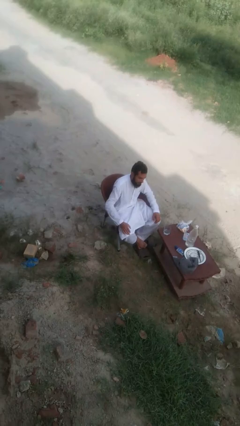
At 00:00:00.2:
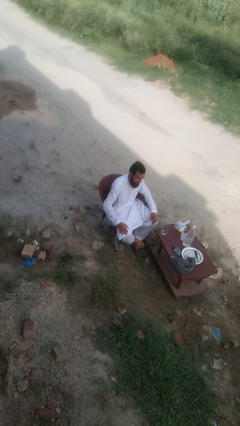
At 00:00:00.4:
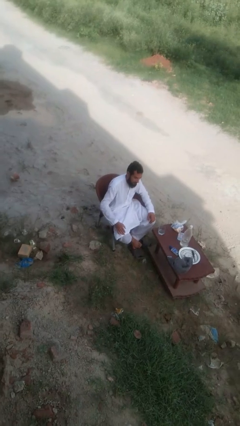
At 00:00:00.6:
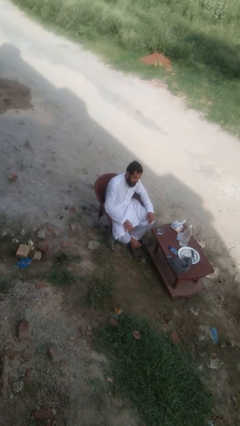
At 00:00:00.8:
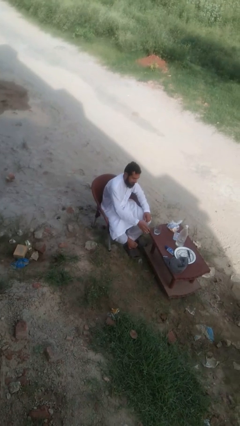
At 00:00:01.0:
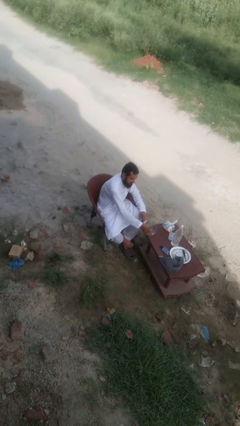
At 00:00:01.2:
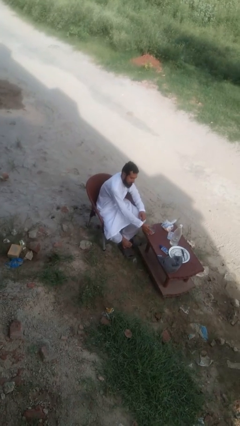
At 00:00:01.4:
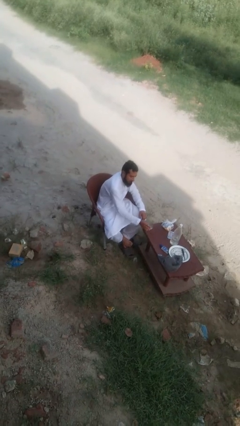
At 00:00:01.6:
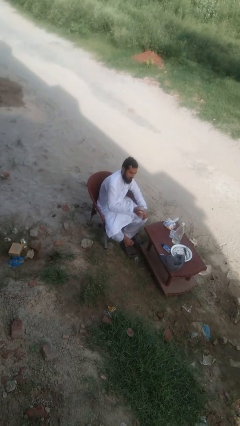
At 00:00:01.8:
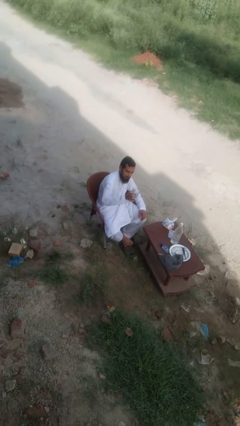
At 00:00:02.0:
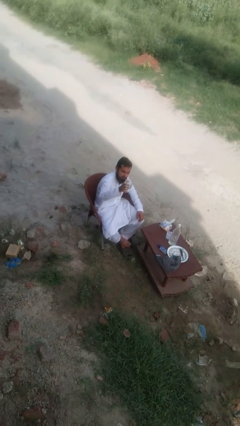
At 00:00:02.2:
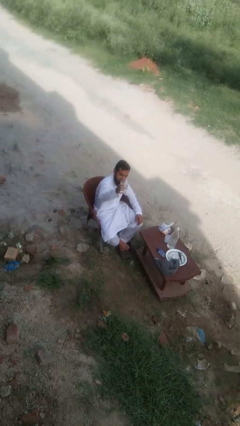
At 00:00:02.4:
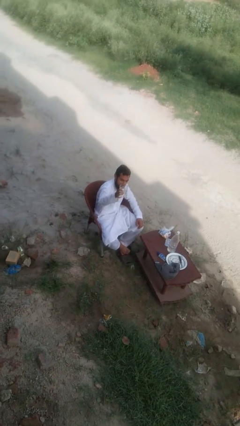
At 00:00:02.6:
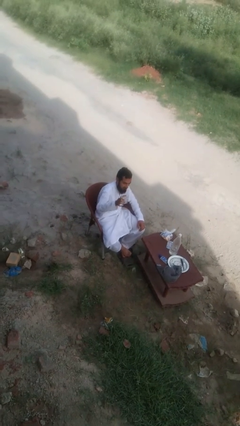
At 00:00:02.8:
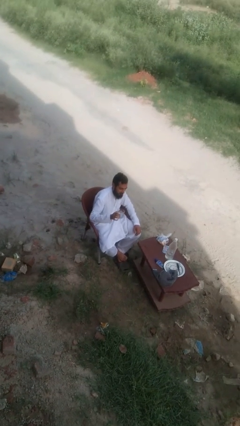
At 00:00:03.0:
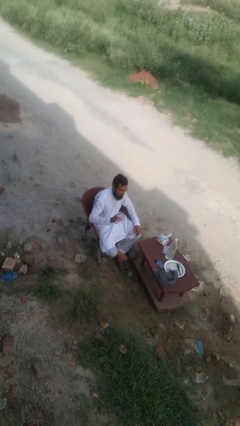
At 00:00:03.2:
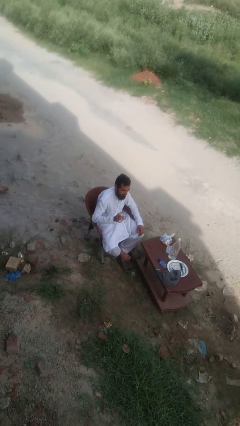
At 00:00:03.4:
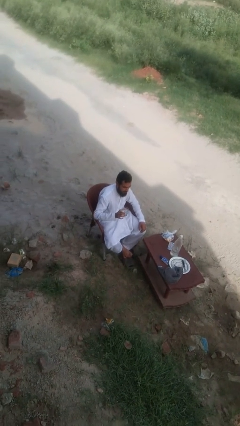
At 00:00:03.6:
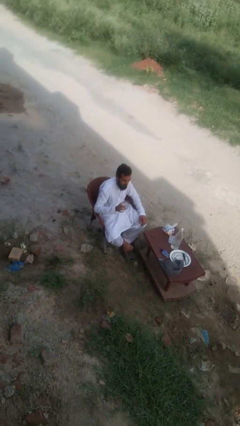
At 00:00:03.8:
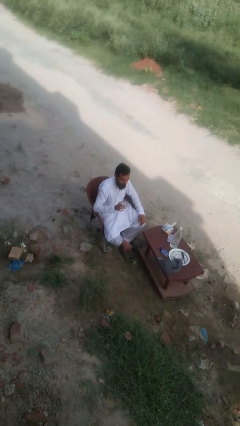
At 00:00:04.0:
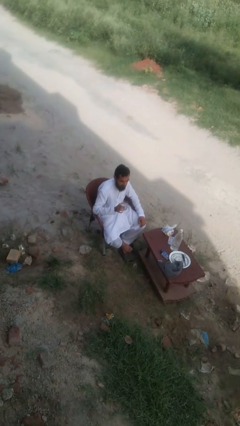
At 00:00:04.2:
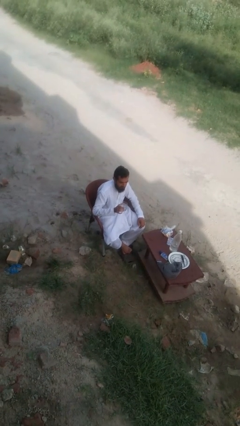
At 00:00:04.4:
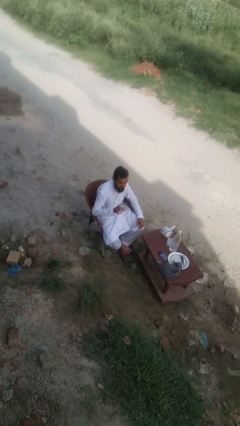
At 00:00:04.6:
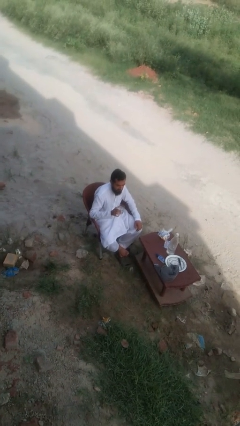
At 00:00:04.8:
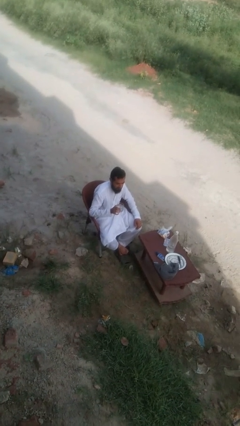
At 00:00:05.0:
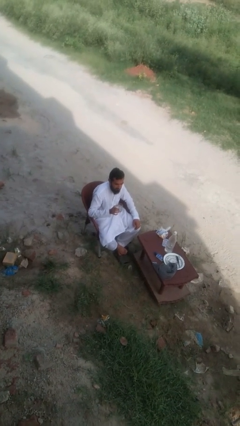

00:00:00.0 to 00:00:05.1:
person picks up object from table

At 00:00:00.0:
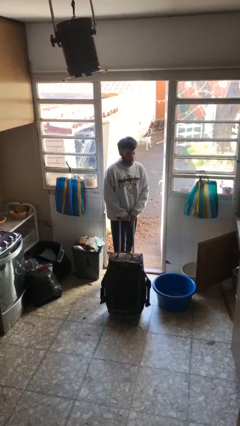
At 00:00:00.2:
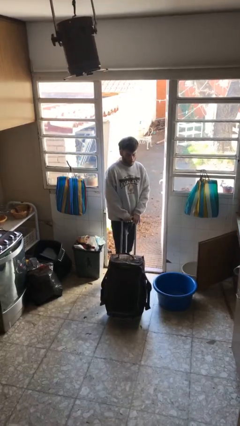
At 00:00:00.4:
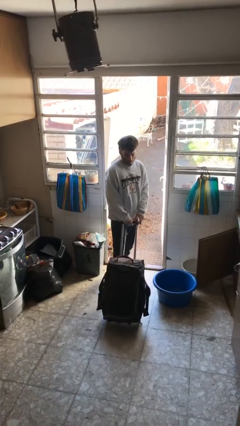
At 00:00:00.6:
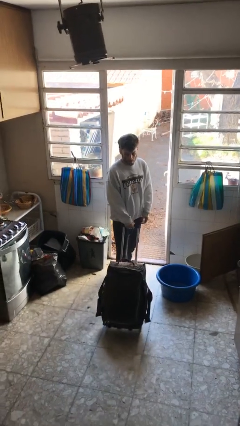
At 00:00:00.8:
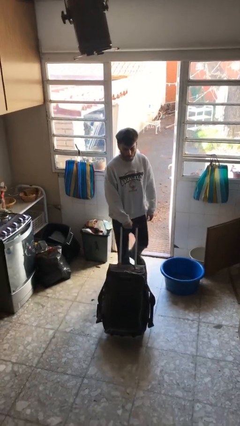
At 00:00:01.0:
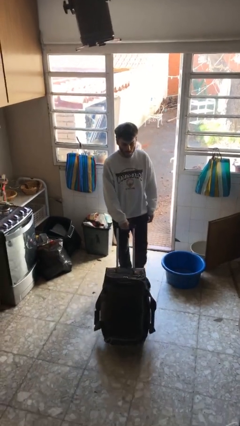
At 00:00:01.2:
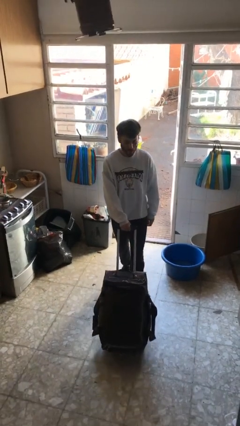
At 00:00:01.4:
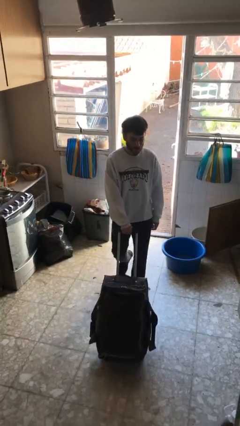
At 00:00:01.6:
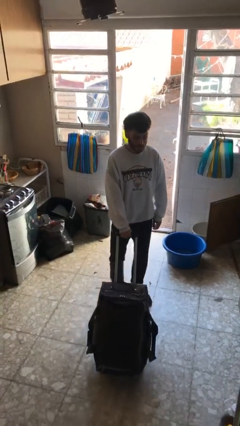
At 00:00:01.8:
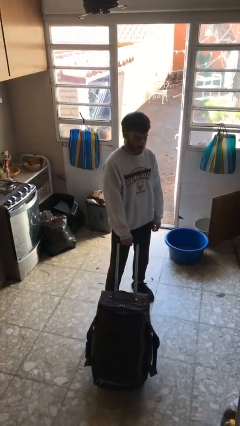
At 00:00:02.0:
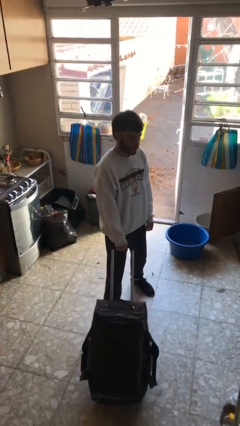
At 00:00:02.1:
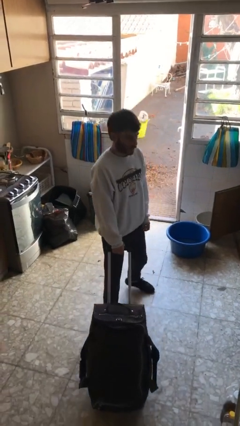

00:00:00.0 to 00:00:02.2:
person pushes wheeled cart

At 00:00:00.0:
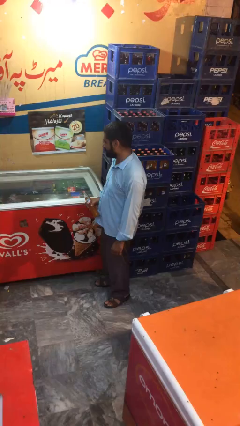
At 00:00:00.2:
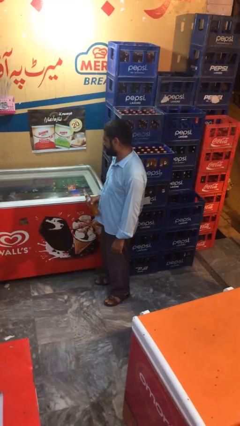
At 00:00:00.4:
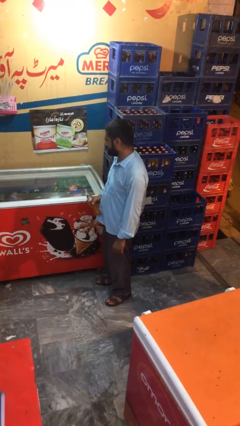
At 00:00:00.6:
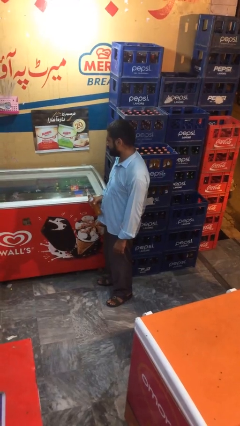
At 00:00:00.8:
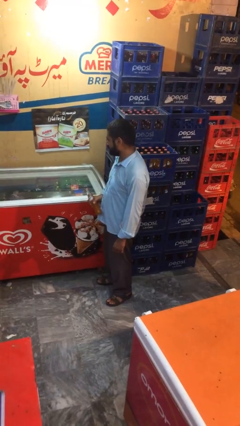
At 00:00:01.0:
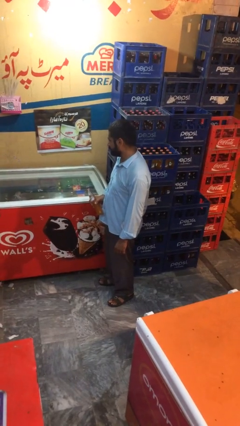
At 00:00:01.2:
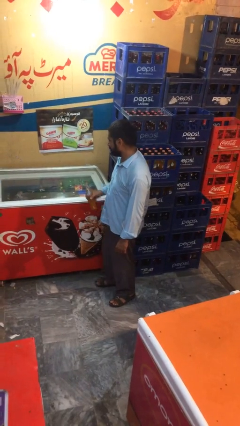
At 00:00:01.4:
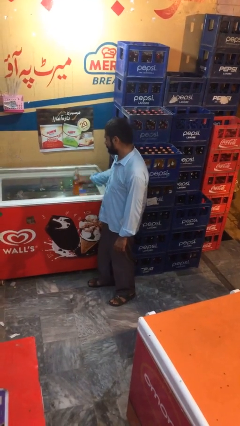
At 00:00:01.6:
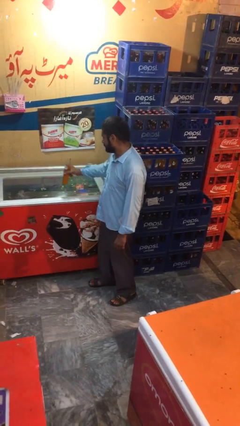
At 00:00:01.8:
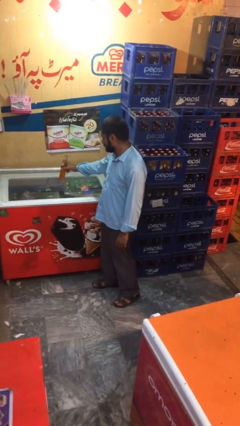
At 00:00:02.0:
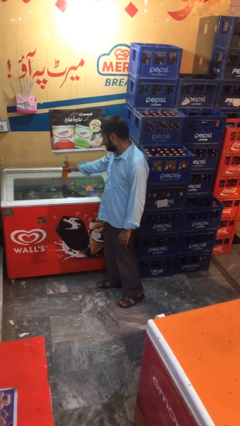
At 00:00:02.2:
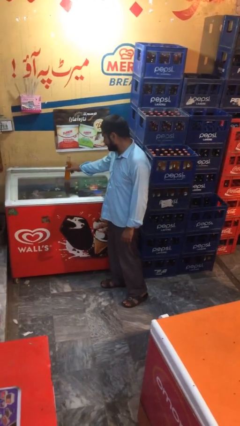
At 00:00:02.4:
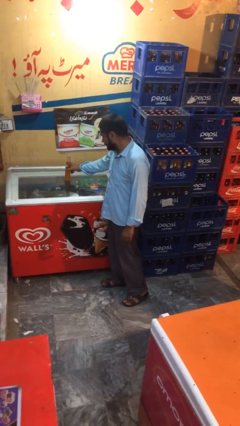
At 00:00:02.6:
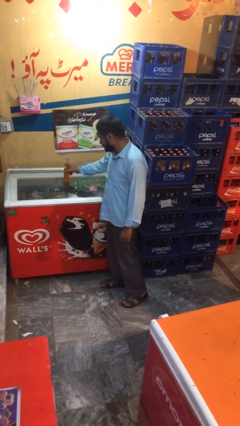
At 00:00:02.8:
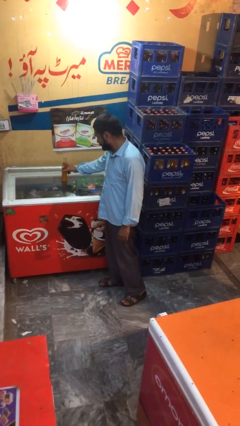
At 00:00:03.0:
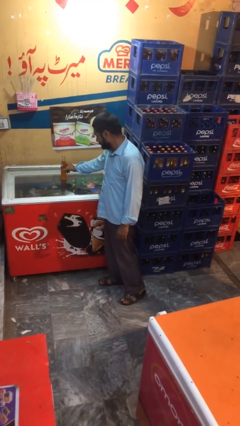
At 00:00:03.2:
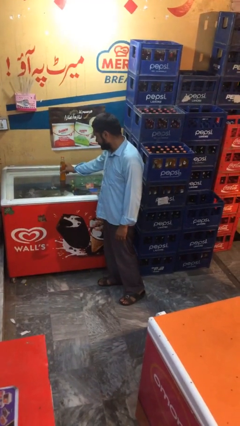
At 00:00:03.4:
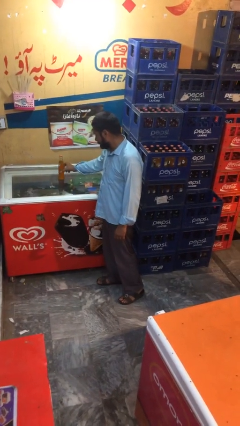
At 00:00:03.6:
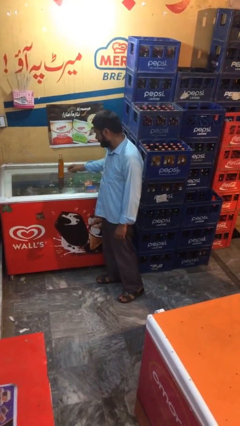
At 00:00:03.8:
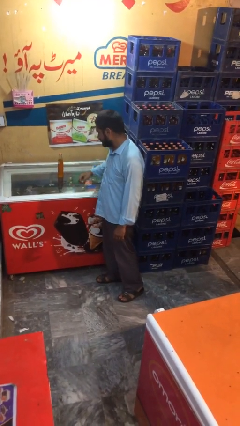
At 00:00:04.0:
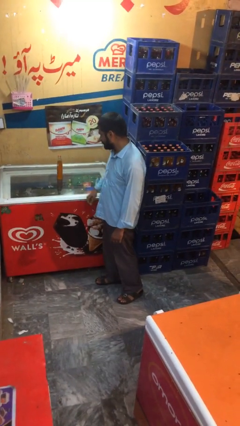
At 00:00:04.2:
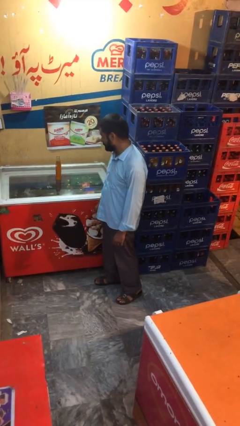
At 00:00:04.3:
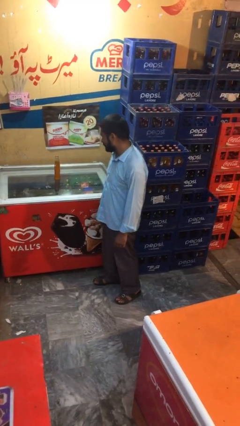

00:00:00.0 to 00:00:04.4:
person puts down object on table

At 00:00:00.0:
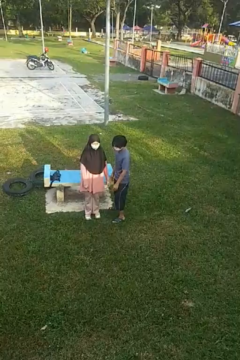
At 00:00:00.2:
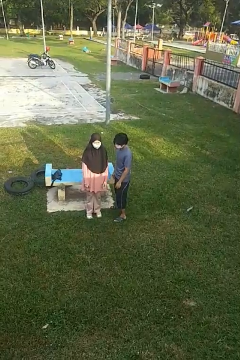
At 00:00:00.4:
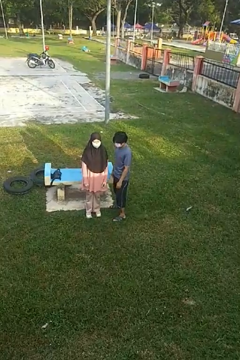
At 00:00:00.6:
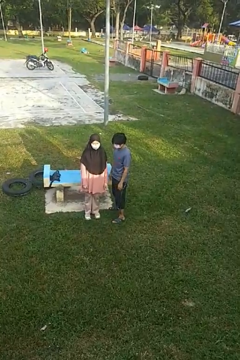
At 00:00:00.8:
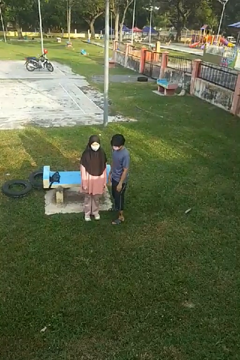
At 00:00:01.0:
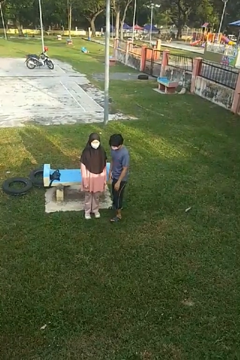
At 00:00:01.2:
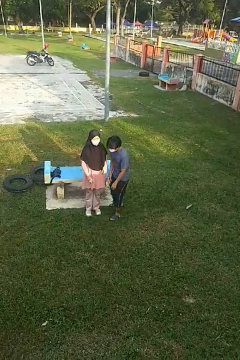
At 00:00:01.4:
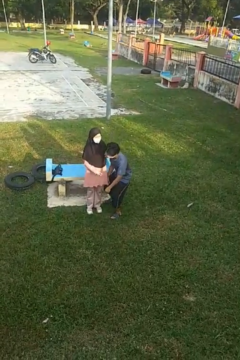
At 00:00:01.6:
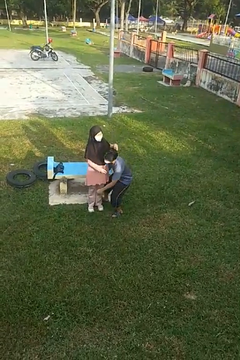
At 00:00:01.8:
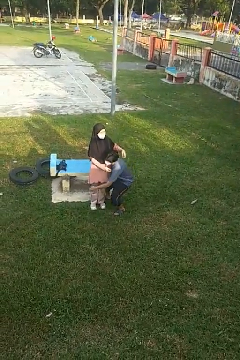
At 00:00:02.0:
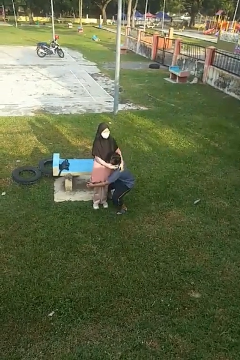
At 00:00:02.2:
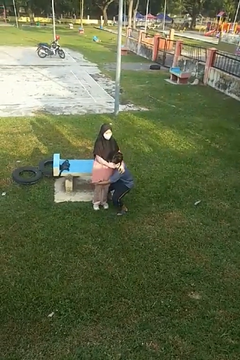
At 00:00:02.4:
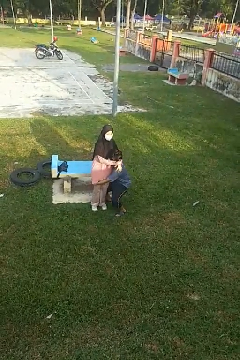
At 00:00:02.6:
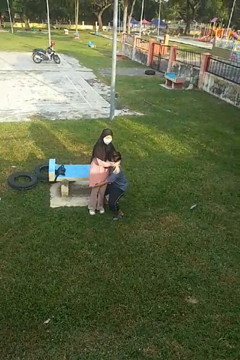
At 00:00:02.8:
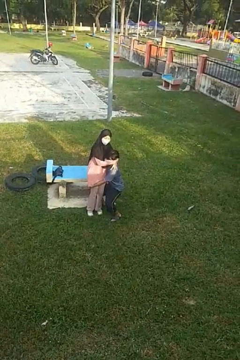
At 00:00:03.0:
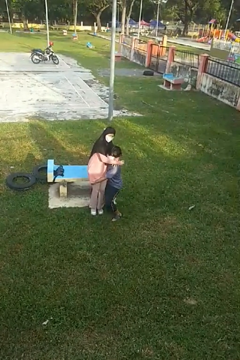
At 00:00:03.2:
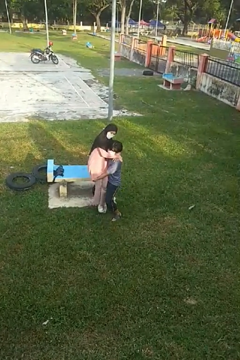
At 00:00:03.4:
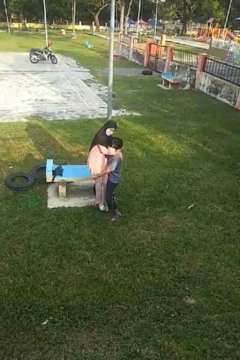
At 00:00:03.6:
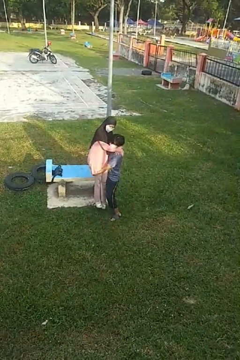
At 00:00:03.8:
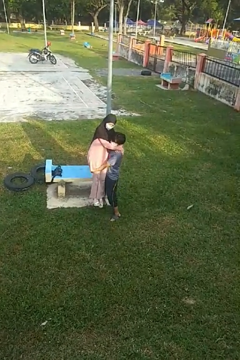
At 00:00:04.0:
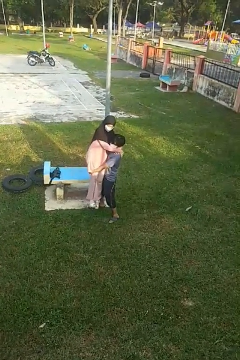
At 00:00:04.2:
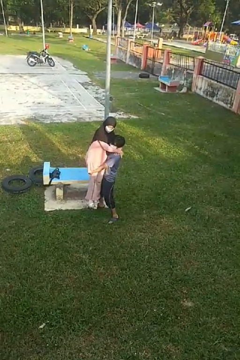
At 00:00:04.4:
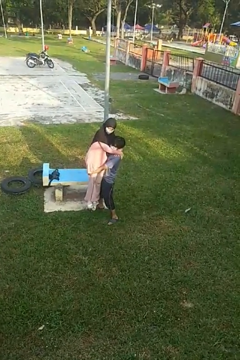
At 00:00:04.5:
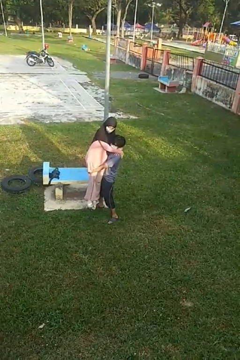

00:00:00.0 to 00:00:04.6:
person picks up person

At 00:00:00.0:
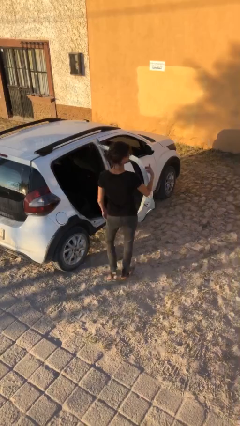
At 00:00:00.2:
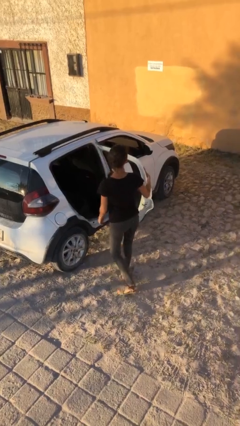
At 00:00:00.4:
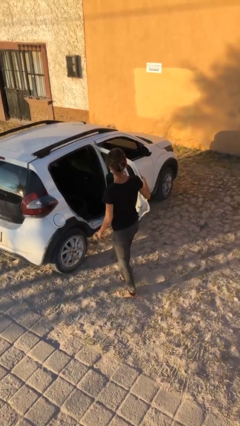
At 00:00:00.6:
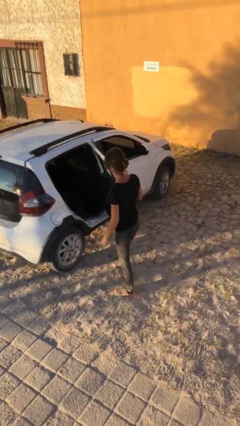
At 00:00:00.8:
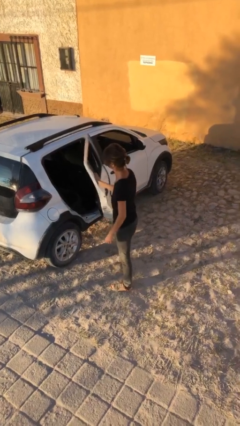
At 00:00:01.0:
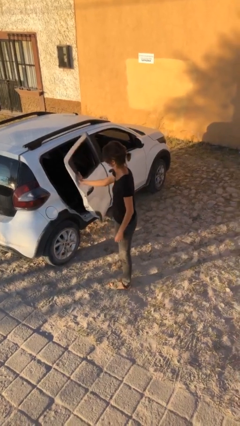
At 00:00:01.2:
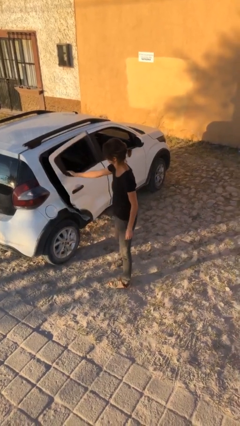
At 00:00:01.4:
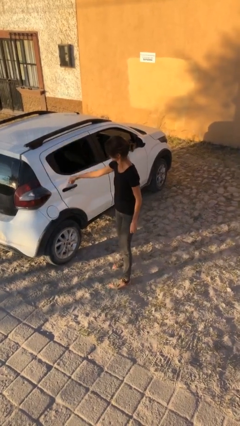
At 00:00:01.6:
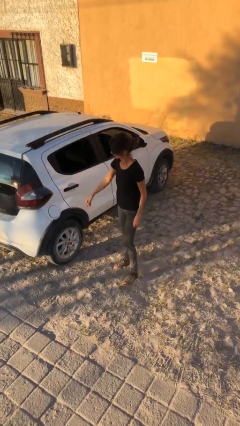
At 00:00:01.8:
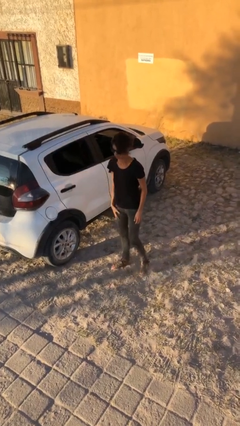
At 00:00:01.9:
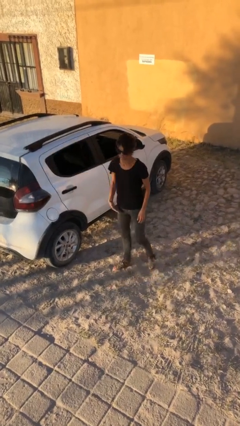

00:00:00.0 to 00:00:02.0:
person closes car door
